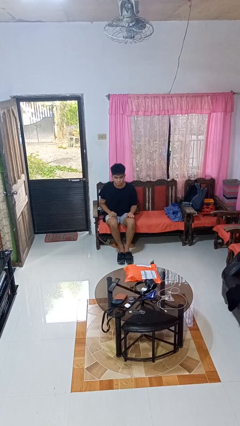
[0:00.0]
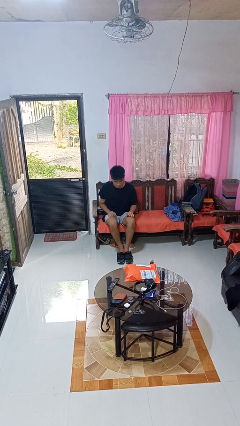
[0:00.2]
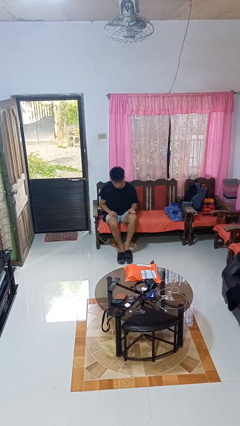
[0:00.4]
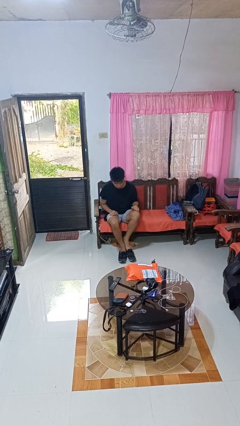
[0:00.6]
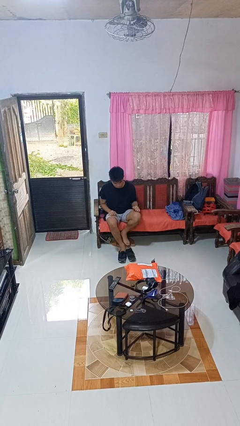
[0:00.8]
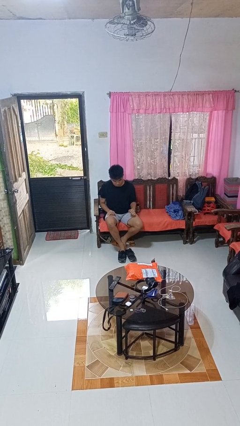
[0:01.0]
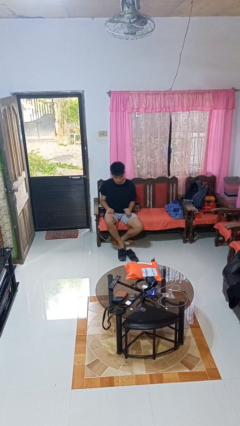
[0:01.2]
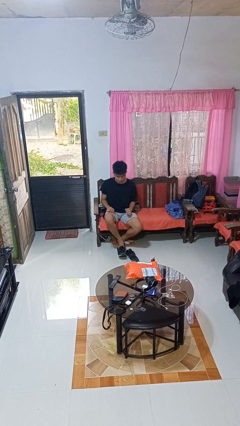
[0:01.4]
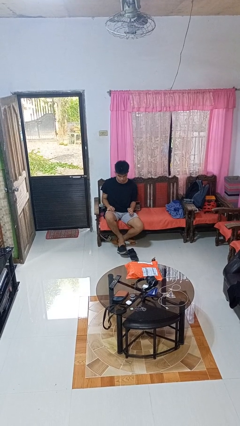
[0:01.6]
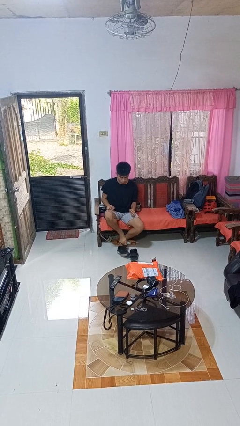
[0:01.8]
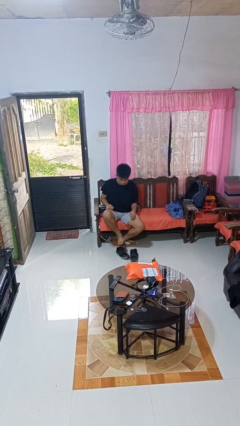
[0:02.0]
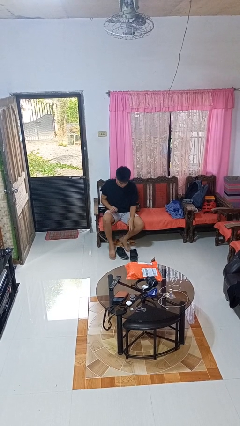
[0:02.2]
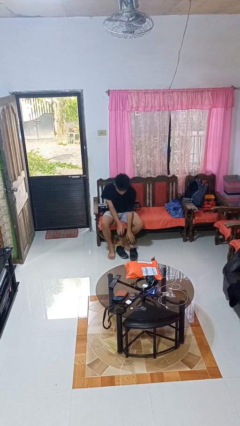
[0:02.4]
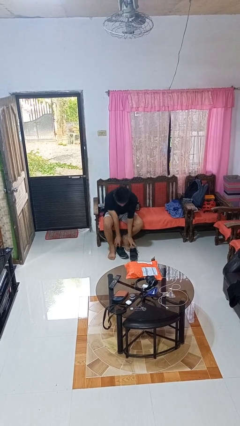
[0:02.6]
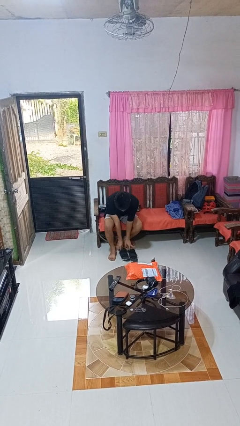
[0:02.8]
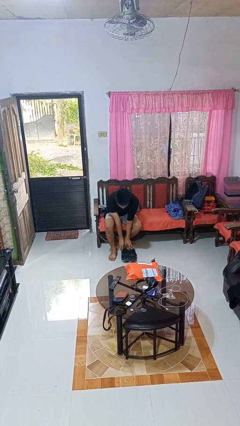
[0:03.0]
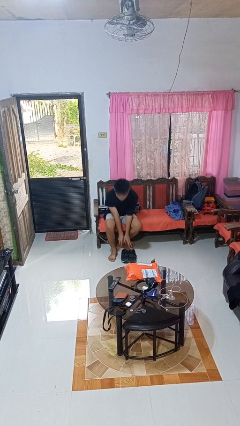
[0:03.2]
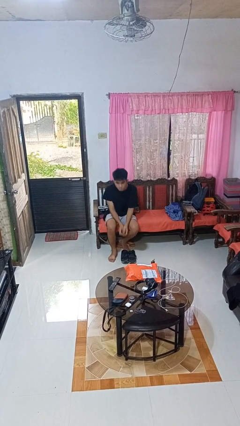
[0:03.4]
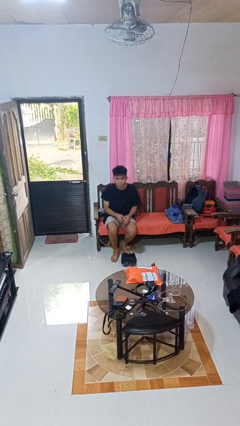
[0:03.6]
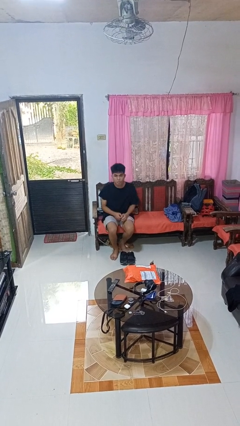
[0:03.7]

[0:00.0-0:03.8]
person takes off shoes

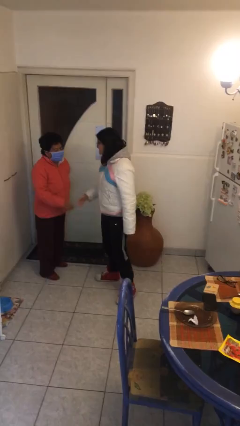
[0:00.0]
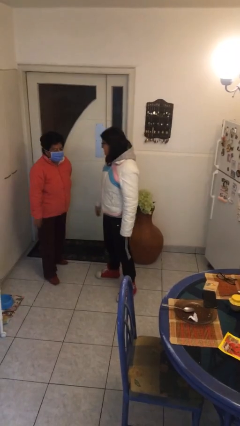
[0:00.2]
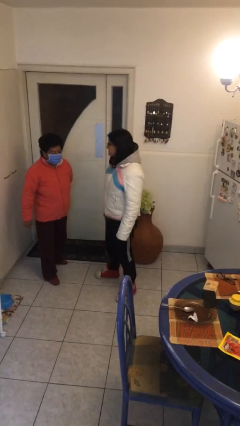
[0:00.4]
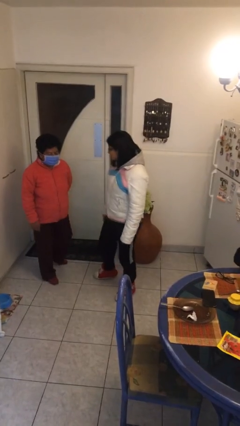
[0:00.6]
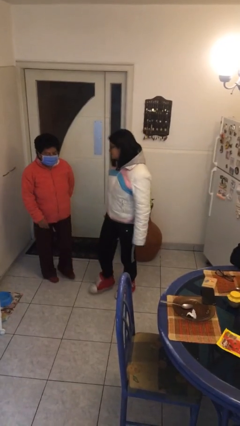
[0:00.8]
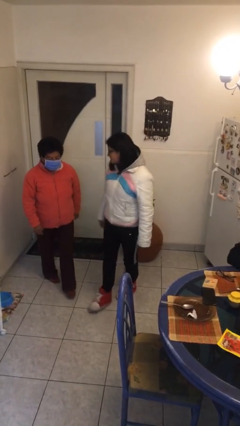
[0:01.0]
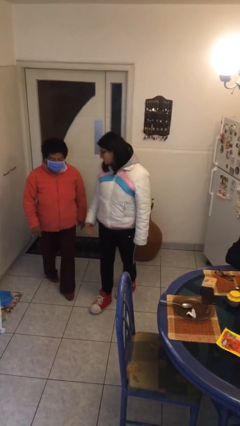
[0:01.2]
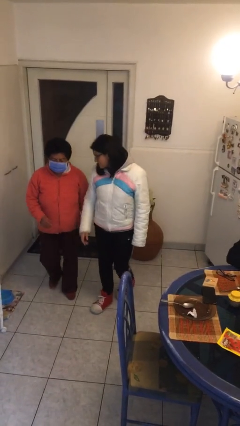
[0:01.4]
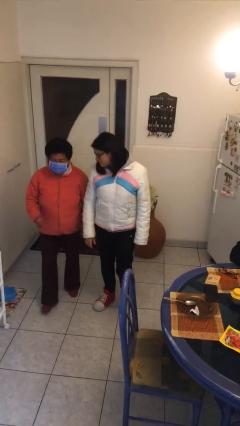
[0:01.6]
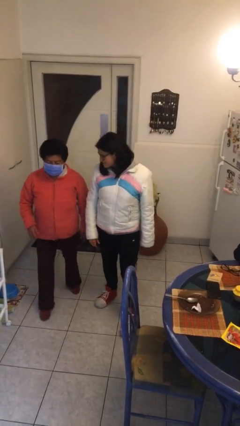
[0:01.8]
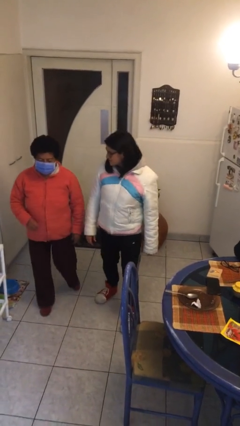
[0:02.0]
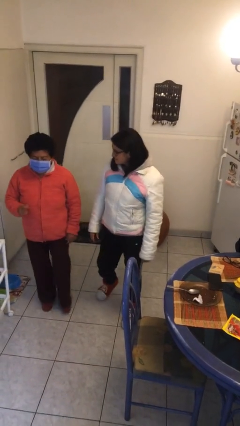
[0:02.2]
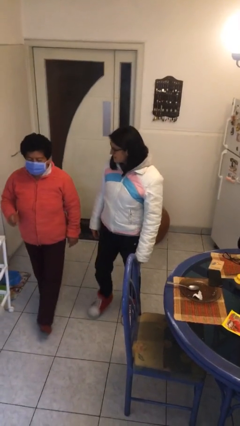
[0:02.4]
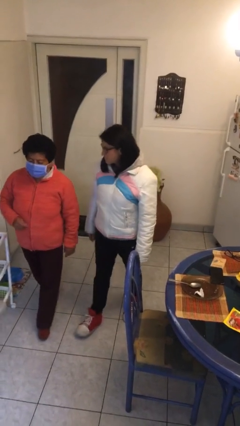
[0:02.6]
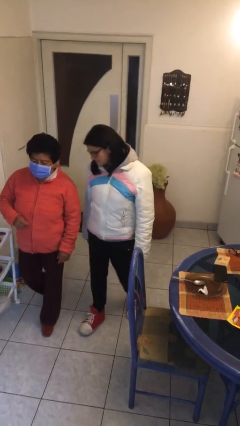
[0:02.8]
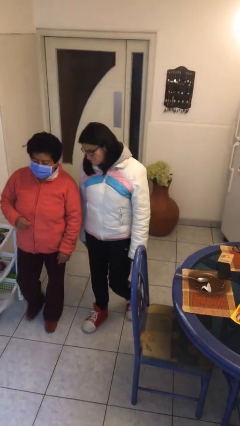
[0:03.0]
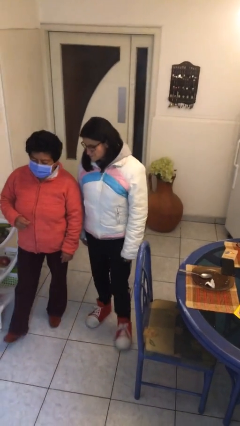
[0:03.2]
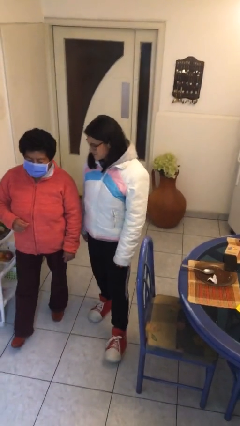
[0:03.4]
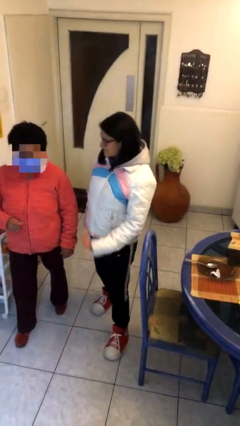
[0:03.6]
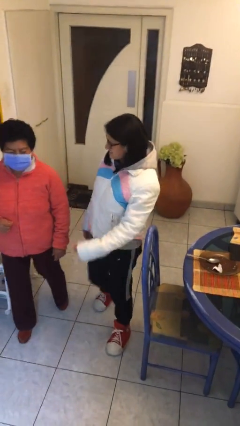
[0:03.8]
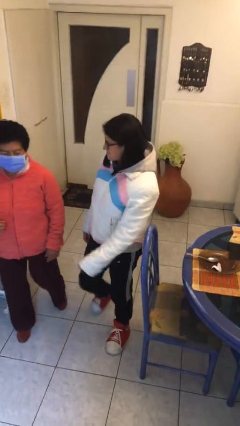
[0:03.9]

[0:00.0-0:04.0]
person talks to person

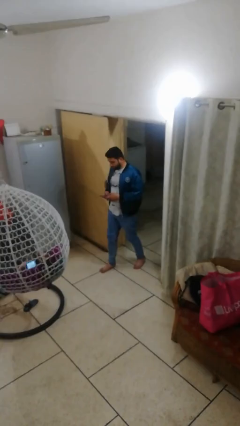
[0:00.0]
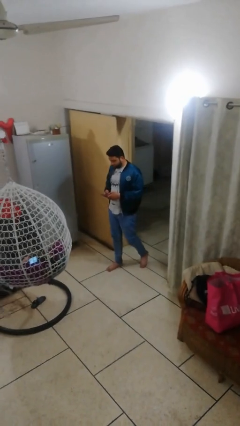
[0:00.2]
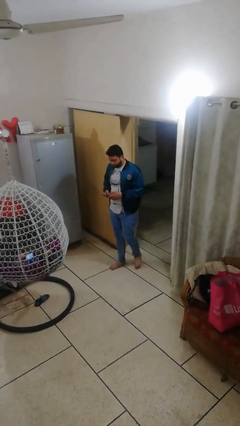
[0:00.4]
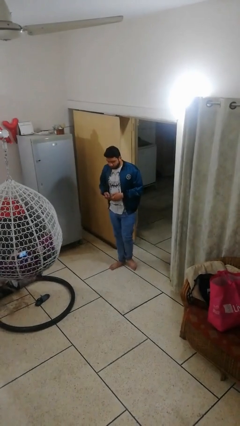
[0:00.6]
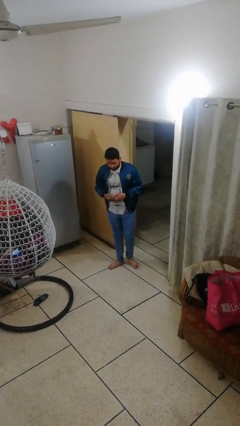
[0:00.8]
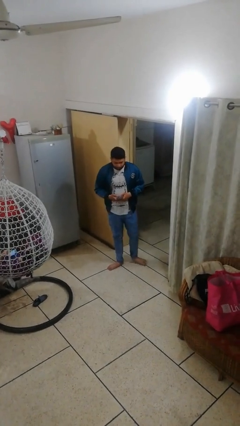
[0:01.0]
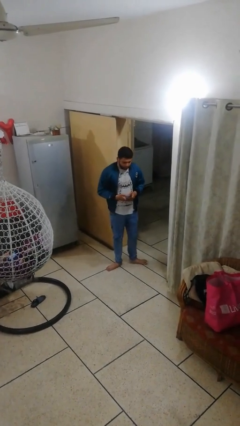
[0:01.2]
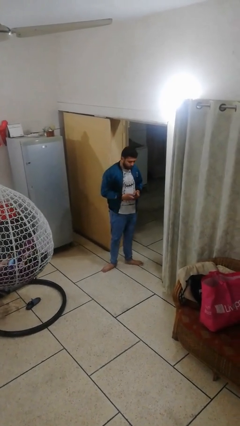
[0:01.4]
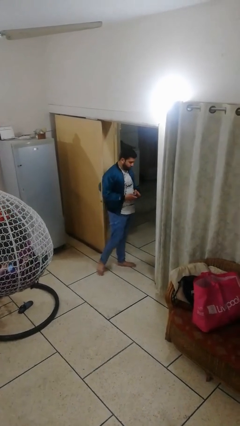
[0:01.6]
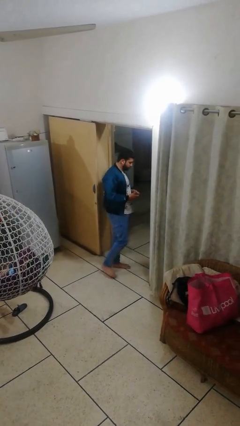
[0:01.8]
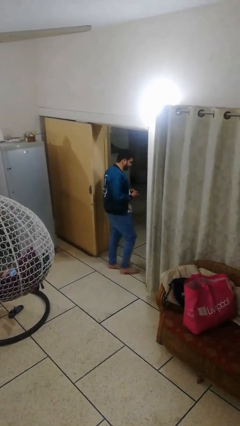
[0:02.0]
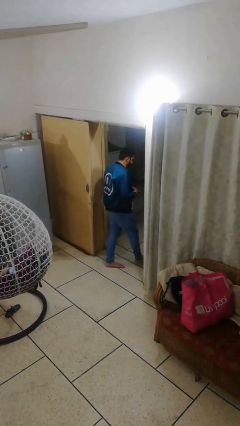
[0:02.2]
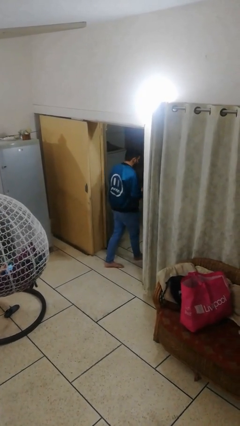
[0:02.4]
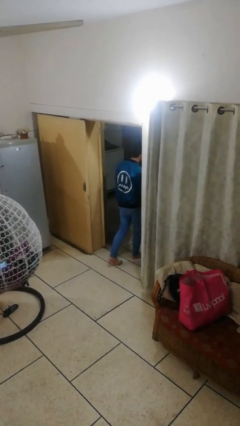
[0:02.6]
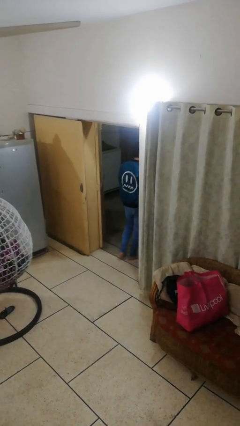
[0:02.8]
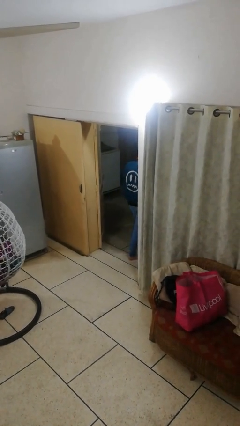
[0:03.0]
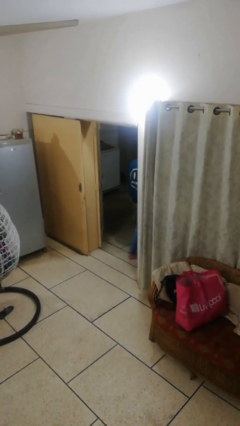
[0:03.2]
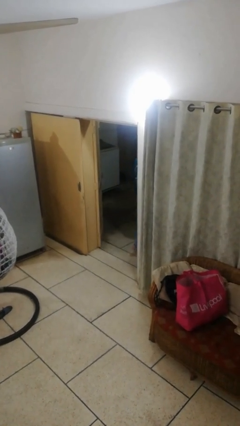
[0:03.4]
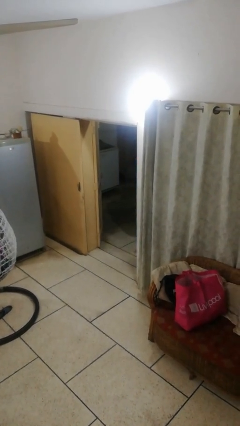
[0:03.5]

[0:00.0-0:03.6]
person exits scene through structure

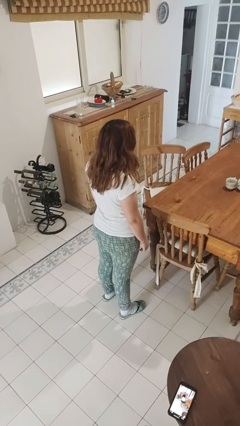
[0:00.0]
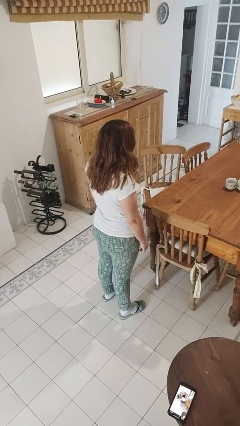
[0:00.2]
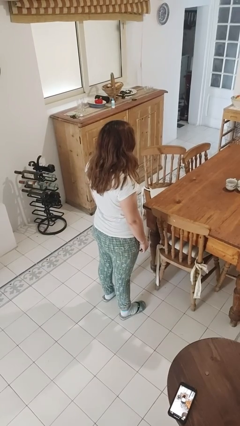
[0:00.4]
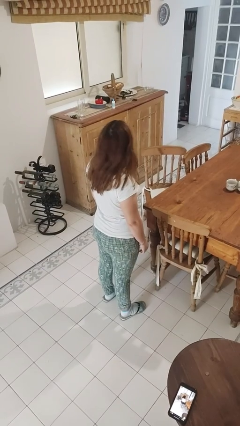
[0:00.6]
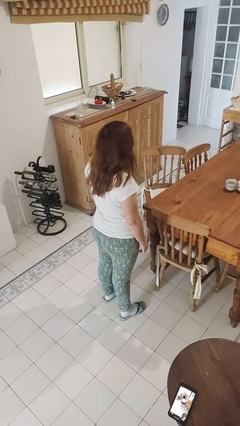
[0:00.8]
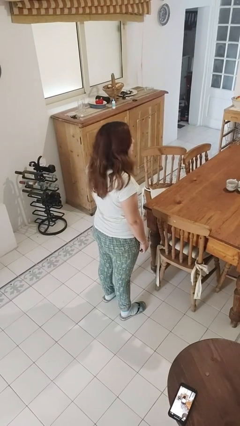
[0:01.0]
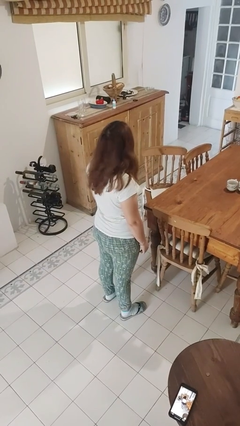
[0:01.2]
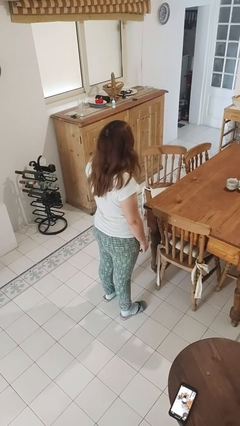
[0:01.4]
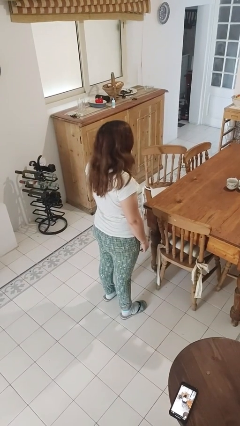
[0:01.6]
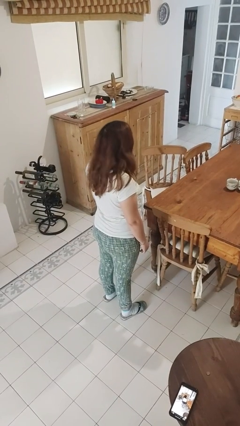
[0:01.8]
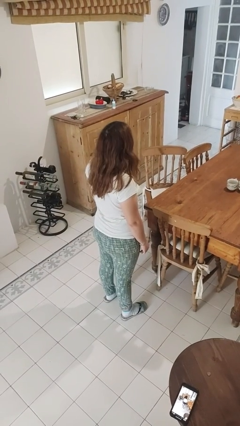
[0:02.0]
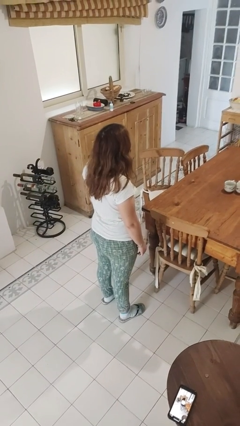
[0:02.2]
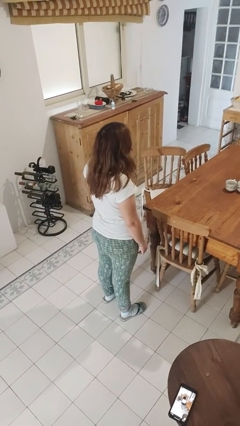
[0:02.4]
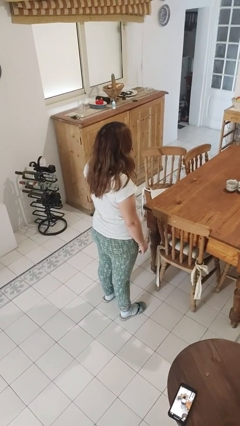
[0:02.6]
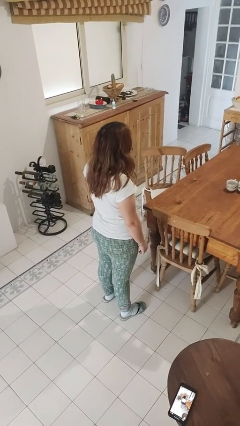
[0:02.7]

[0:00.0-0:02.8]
person shakes head

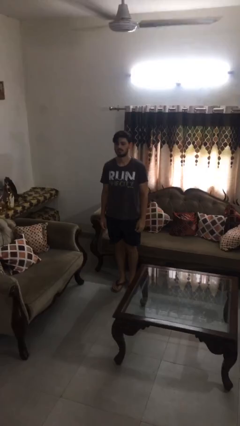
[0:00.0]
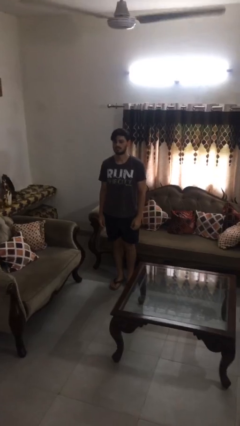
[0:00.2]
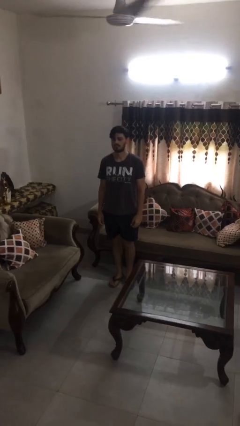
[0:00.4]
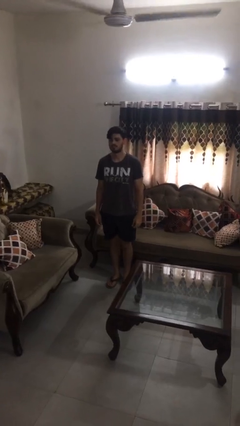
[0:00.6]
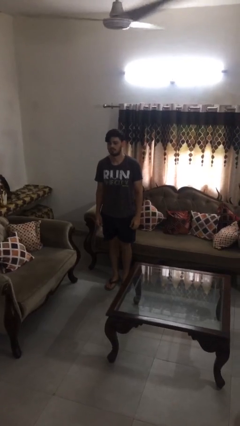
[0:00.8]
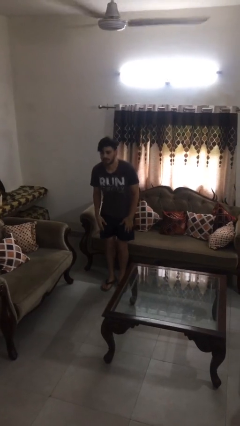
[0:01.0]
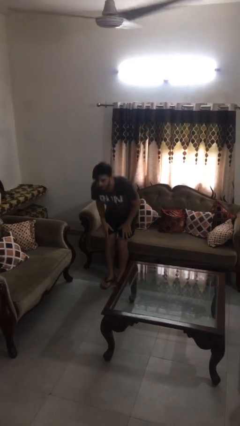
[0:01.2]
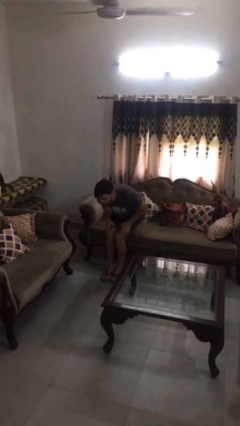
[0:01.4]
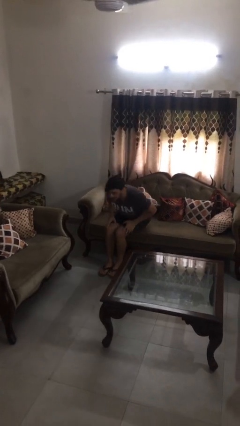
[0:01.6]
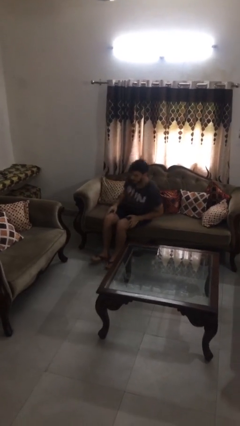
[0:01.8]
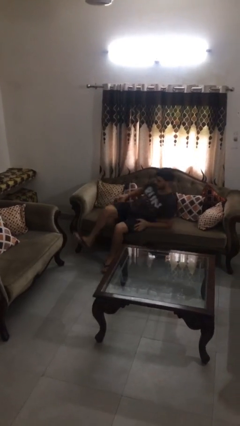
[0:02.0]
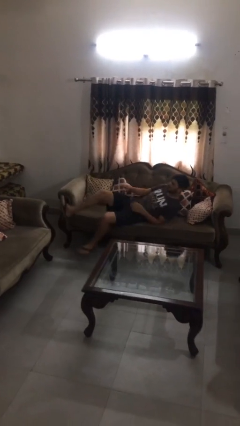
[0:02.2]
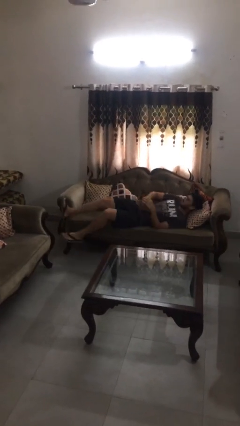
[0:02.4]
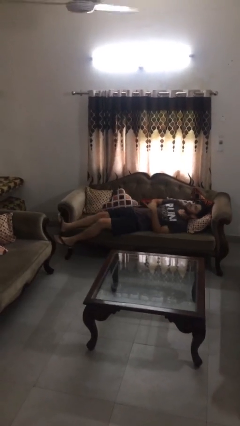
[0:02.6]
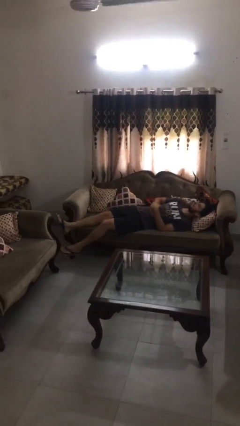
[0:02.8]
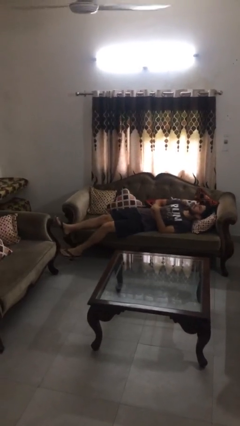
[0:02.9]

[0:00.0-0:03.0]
person lies down on couch
